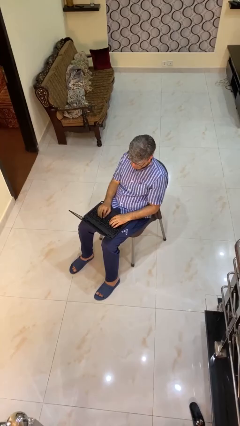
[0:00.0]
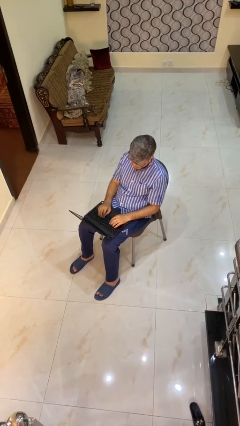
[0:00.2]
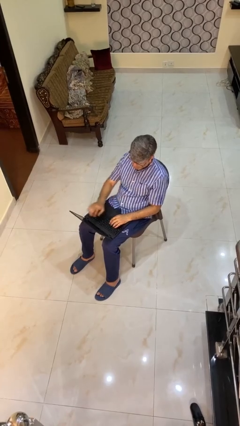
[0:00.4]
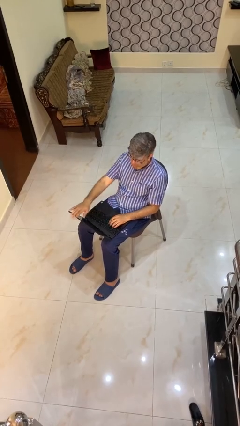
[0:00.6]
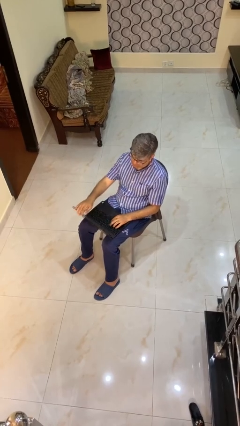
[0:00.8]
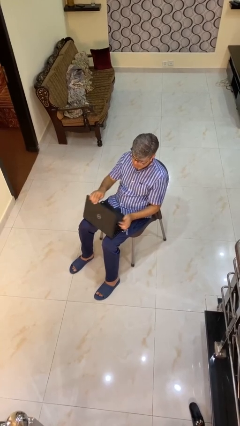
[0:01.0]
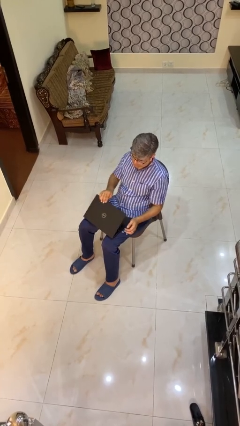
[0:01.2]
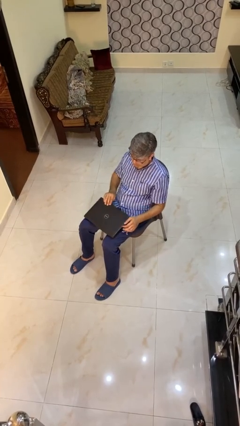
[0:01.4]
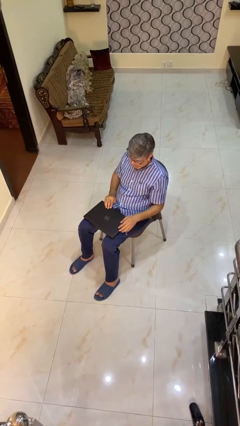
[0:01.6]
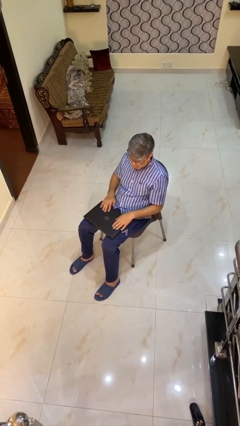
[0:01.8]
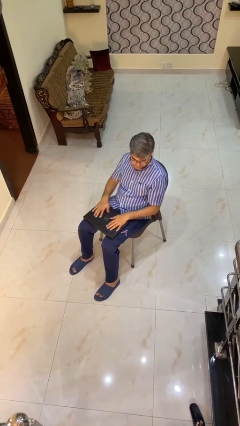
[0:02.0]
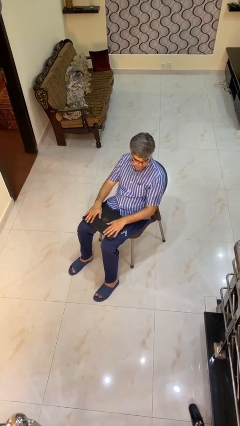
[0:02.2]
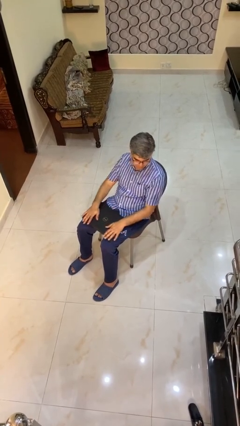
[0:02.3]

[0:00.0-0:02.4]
person closes laptop

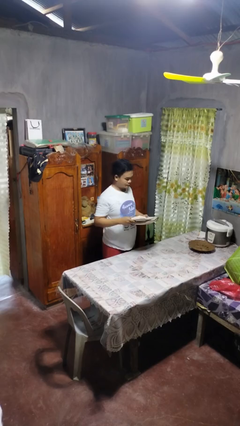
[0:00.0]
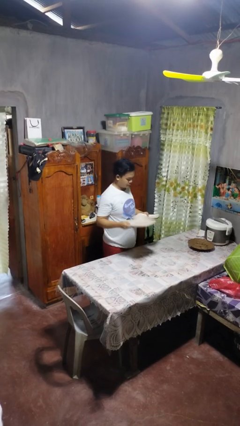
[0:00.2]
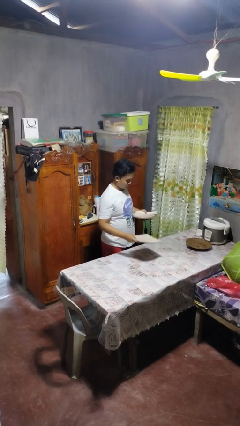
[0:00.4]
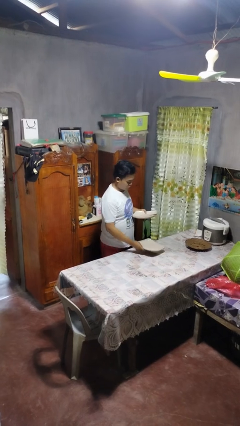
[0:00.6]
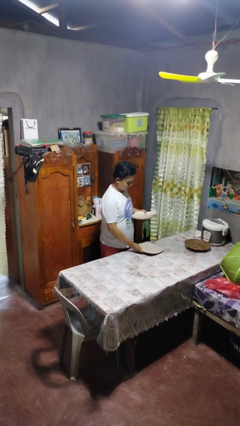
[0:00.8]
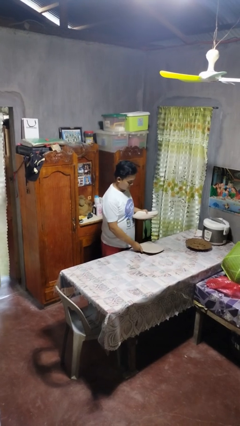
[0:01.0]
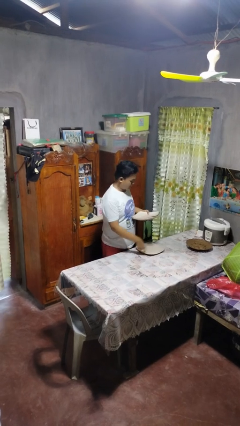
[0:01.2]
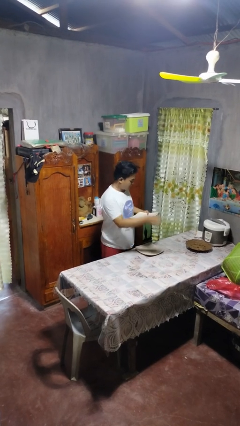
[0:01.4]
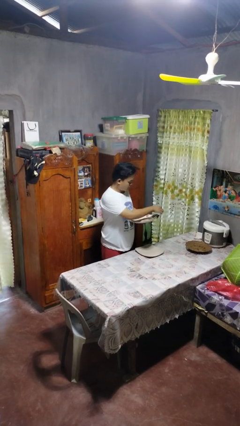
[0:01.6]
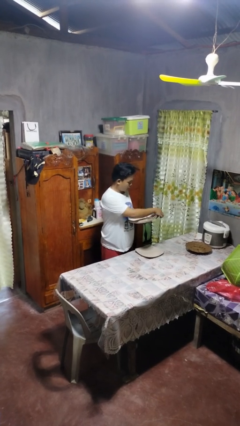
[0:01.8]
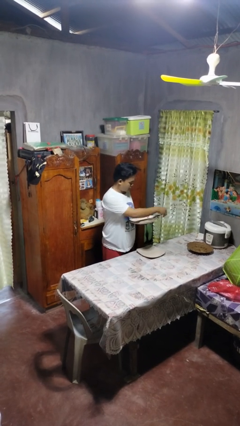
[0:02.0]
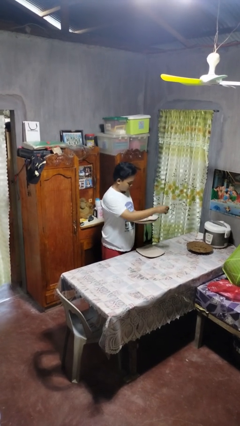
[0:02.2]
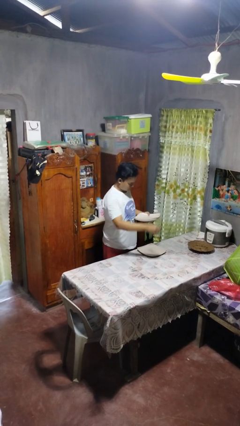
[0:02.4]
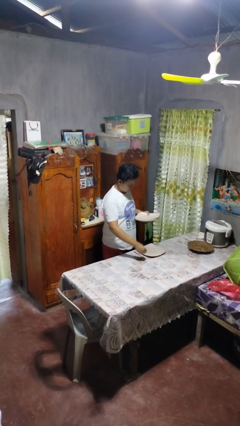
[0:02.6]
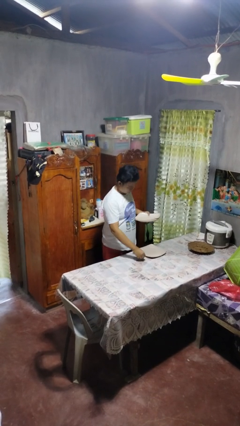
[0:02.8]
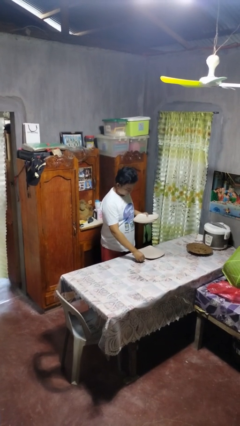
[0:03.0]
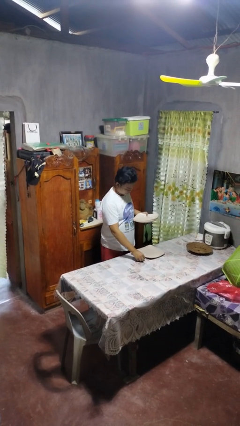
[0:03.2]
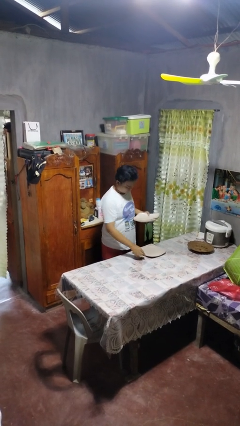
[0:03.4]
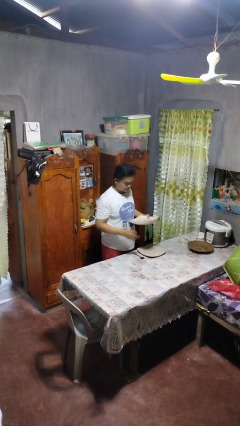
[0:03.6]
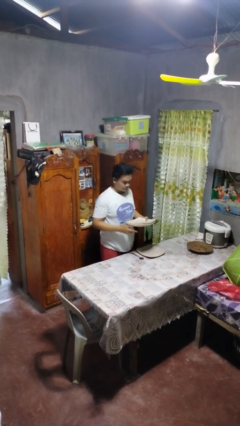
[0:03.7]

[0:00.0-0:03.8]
person sets table

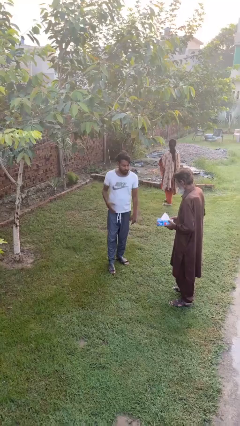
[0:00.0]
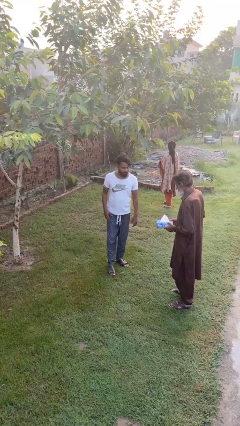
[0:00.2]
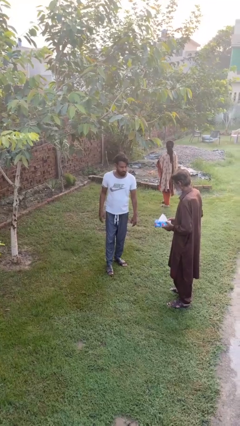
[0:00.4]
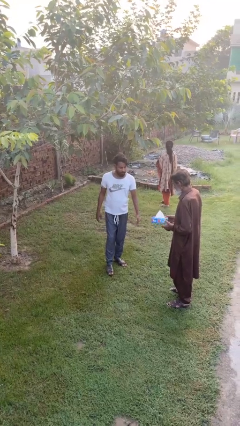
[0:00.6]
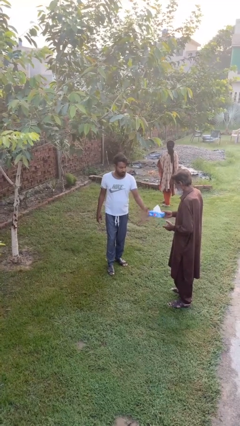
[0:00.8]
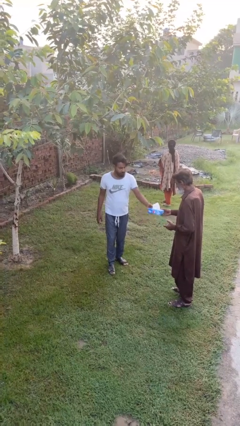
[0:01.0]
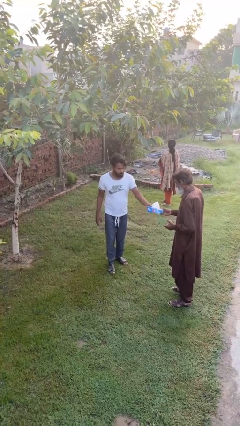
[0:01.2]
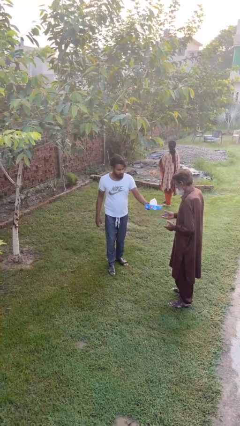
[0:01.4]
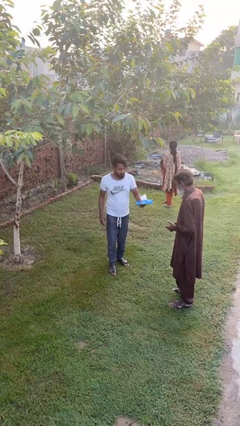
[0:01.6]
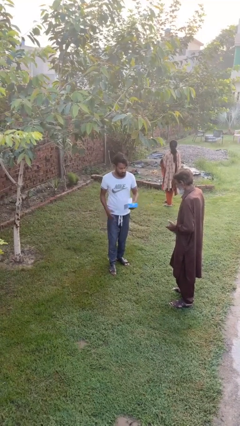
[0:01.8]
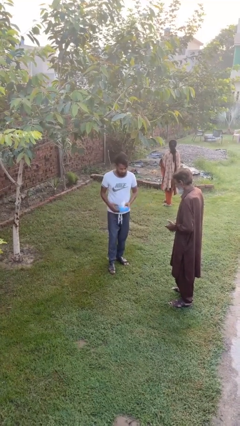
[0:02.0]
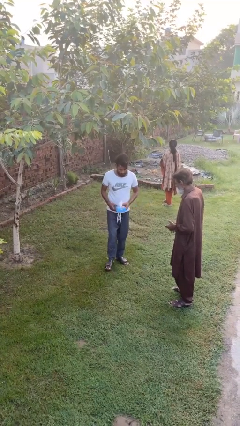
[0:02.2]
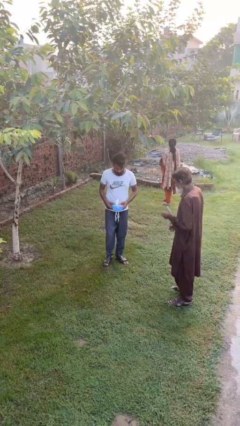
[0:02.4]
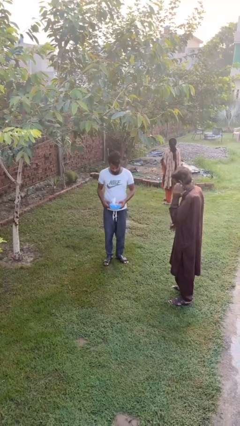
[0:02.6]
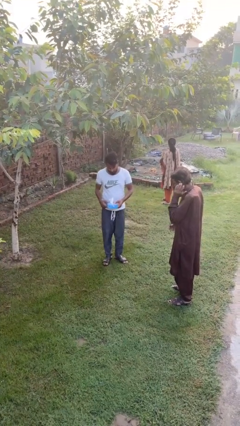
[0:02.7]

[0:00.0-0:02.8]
person transfers object to person

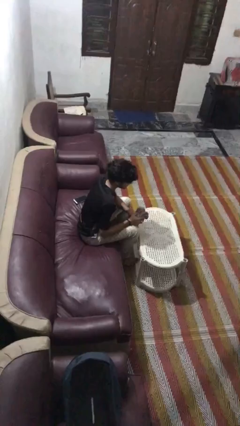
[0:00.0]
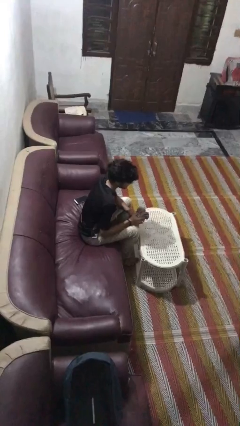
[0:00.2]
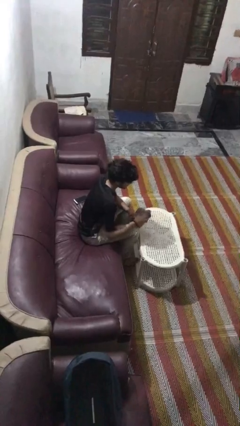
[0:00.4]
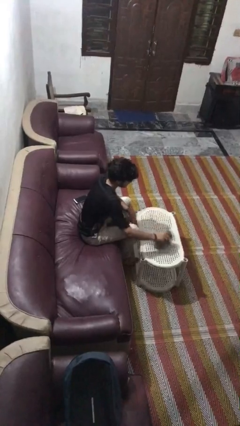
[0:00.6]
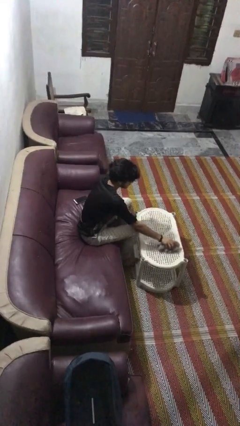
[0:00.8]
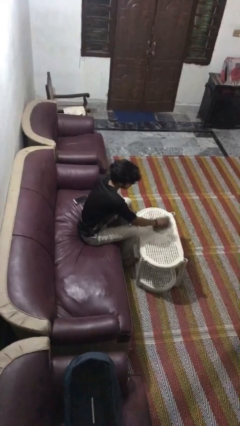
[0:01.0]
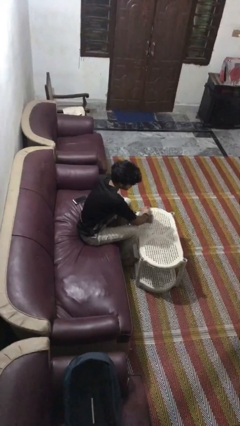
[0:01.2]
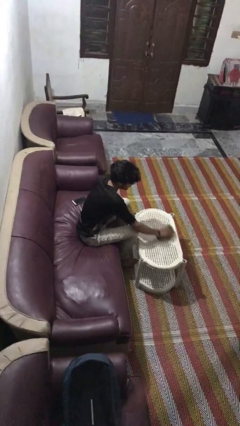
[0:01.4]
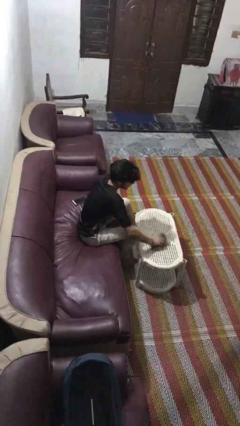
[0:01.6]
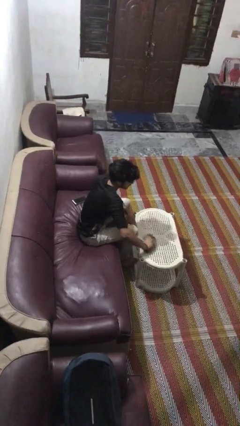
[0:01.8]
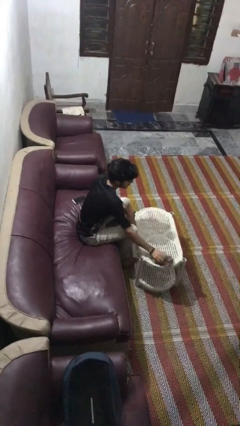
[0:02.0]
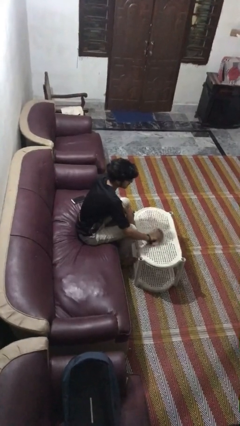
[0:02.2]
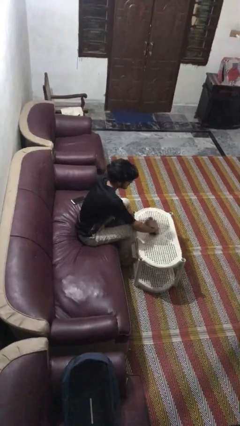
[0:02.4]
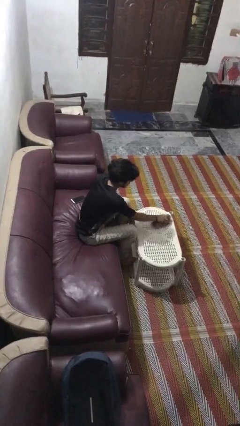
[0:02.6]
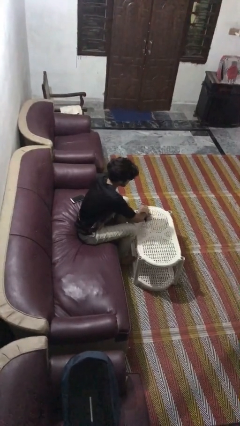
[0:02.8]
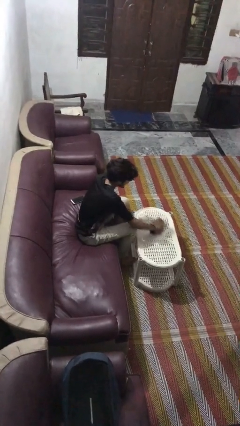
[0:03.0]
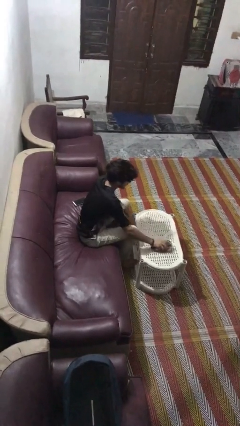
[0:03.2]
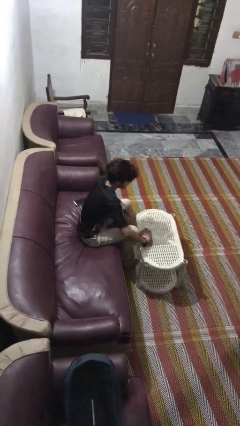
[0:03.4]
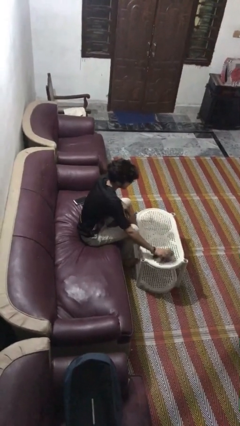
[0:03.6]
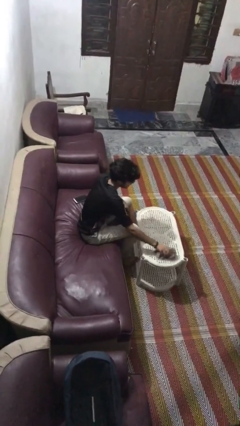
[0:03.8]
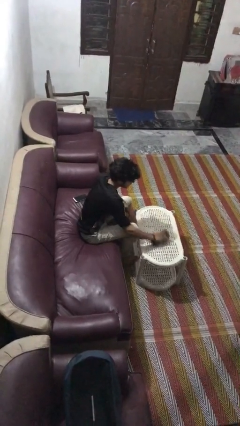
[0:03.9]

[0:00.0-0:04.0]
person cleans table with rag

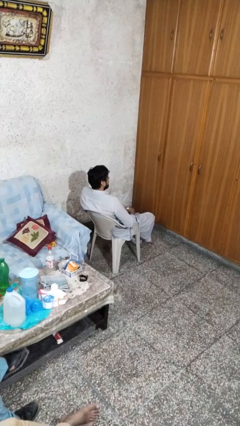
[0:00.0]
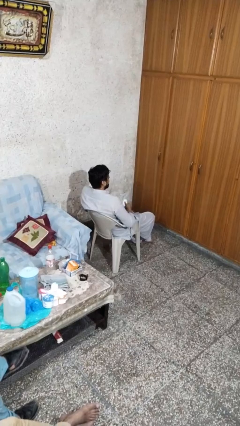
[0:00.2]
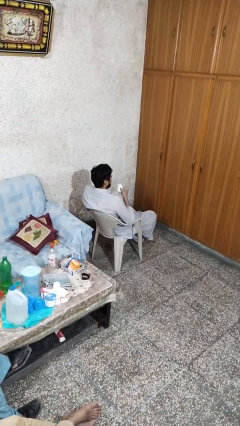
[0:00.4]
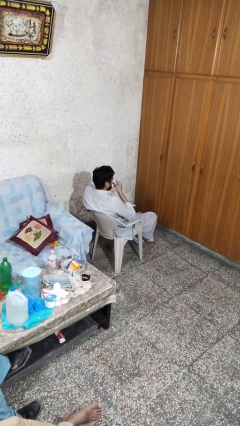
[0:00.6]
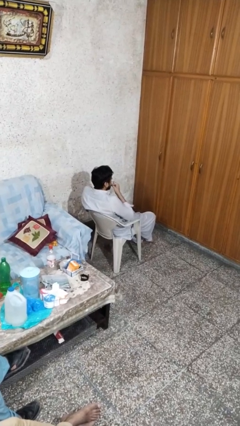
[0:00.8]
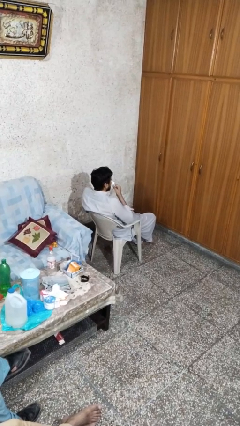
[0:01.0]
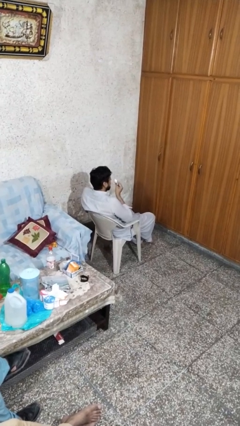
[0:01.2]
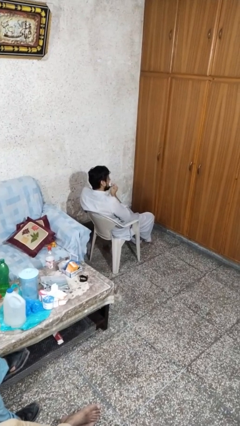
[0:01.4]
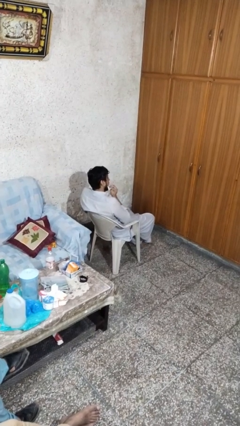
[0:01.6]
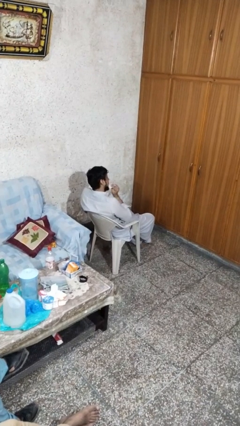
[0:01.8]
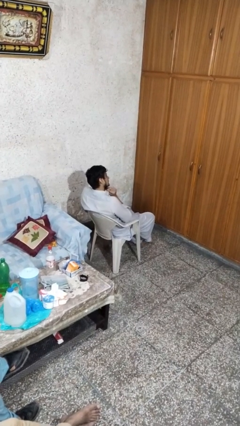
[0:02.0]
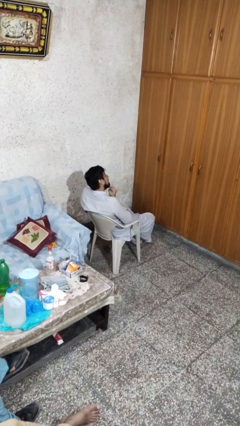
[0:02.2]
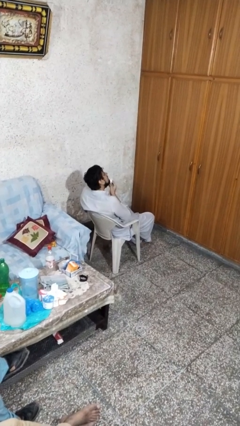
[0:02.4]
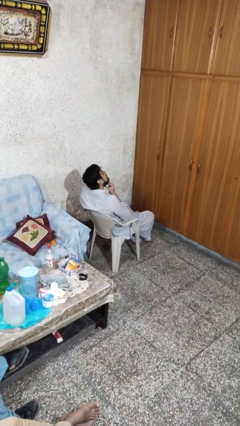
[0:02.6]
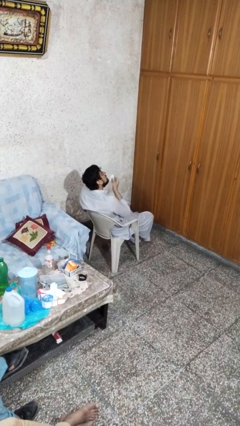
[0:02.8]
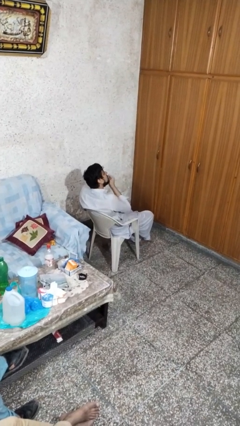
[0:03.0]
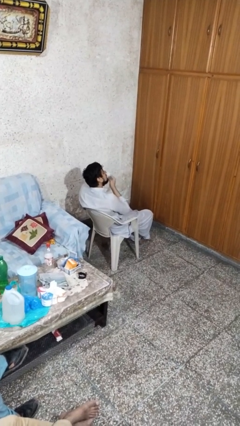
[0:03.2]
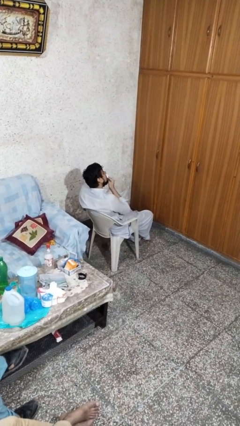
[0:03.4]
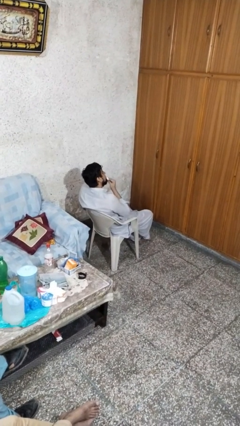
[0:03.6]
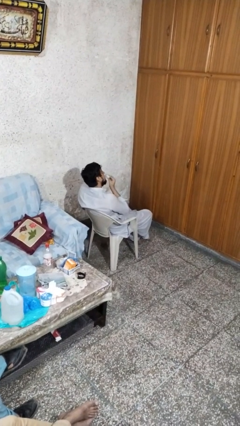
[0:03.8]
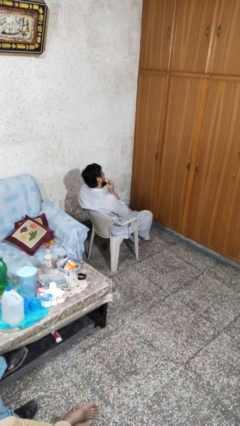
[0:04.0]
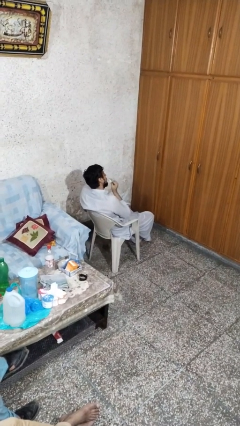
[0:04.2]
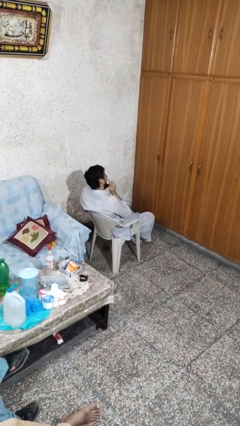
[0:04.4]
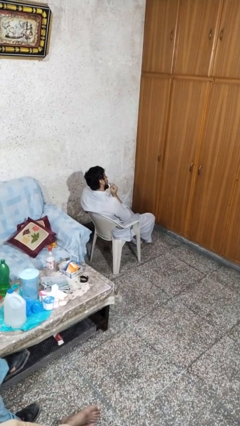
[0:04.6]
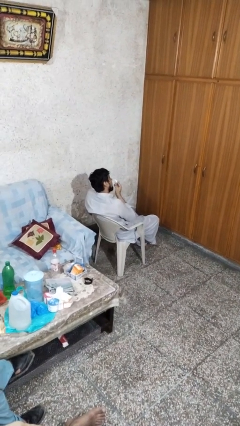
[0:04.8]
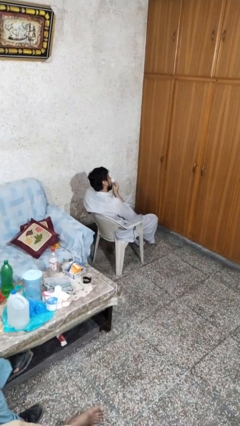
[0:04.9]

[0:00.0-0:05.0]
person wipes mouth with napkin
